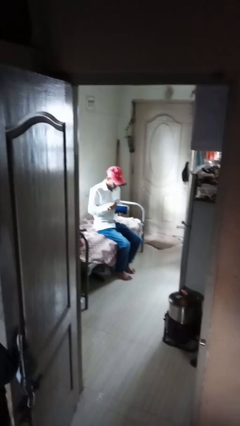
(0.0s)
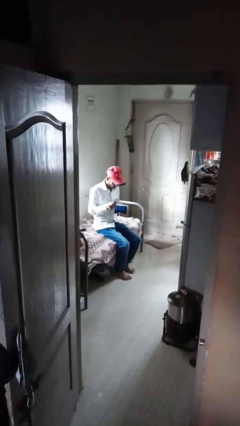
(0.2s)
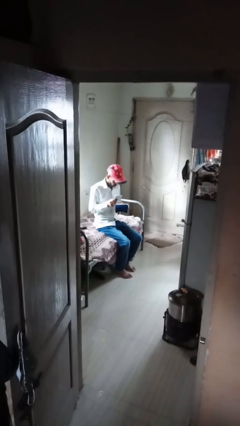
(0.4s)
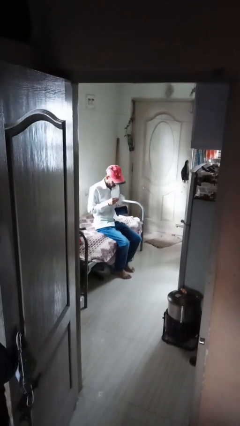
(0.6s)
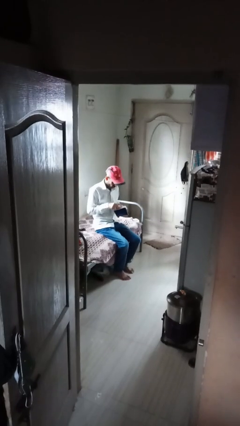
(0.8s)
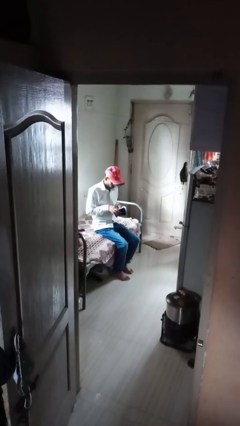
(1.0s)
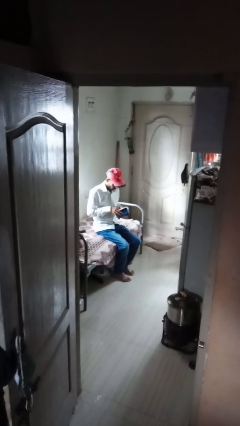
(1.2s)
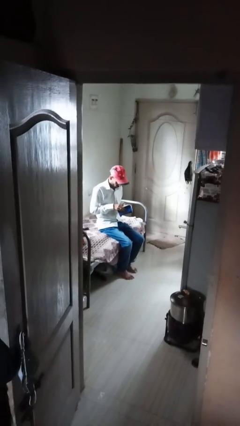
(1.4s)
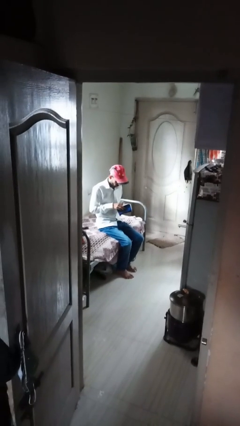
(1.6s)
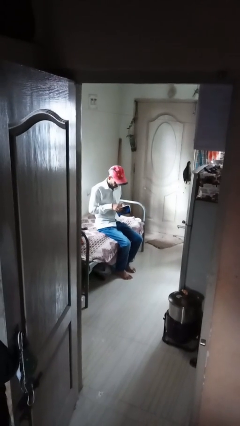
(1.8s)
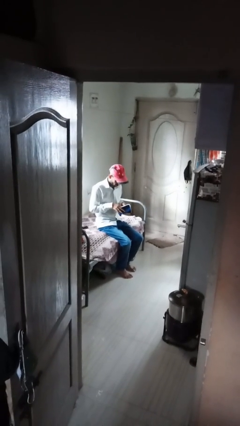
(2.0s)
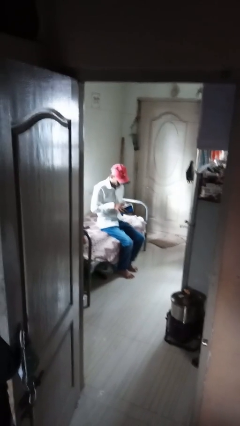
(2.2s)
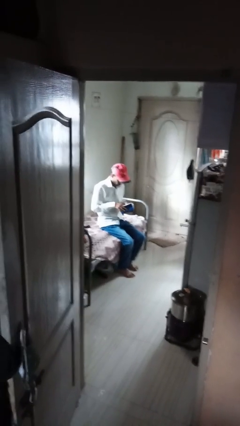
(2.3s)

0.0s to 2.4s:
person puts object into purse

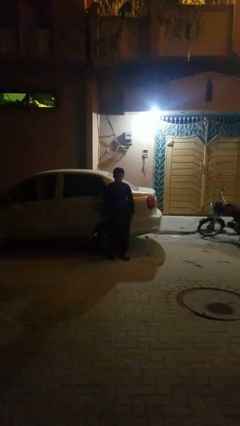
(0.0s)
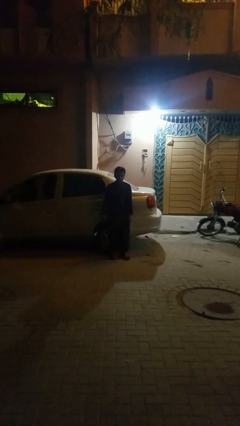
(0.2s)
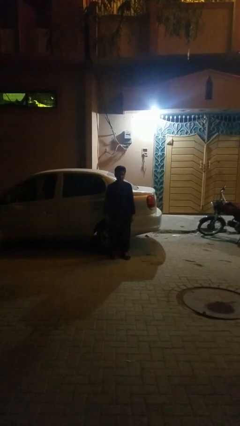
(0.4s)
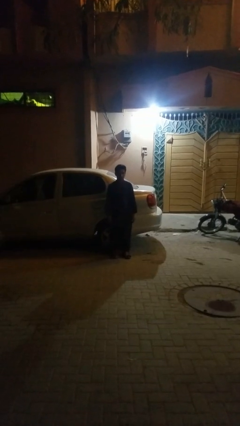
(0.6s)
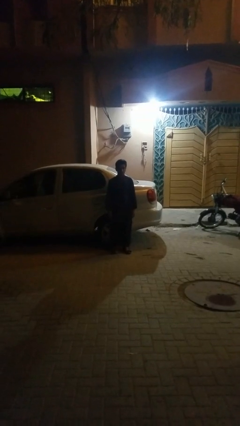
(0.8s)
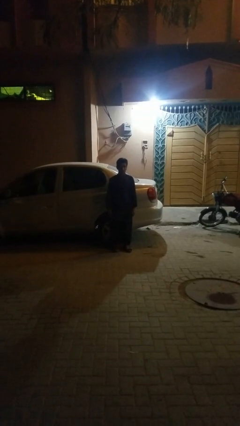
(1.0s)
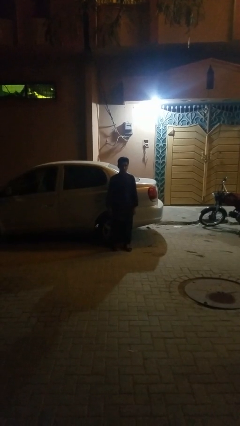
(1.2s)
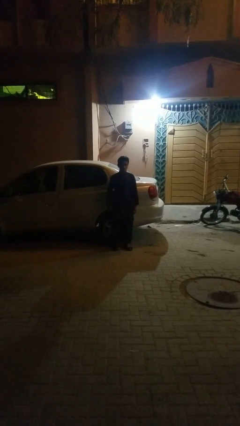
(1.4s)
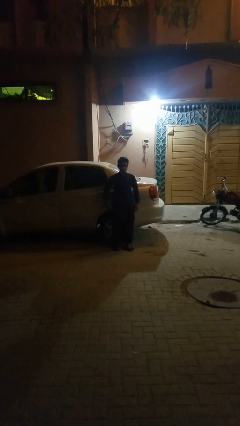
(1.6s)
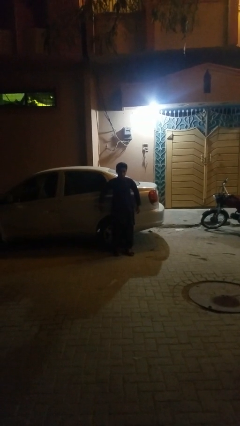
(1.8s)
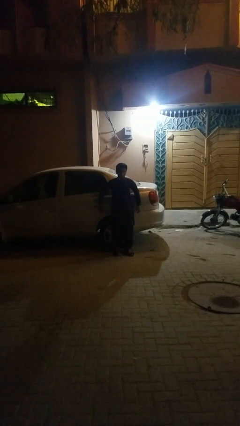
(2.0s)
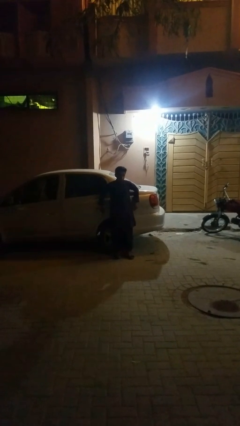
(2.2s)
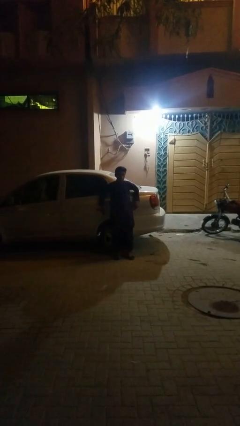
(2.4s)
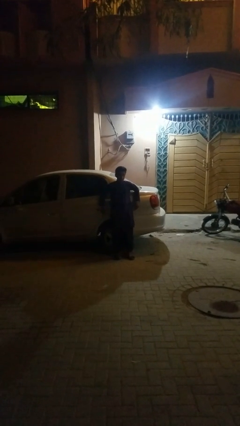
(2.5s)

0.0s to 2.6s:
person leans against car

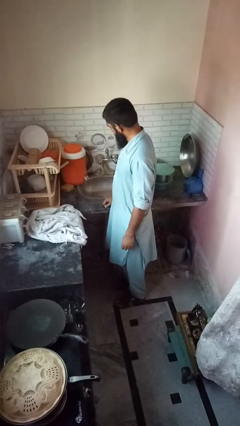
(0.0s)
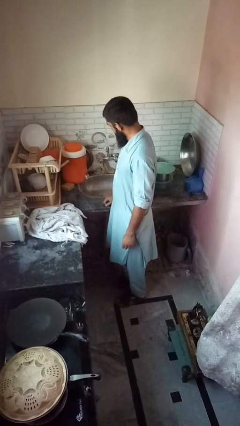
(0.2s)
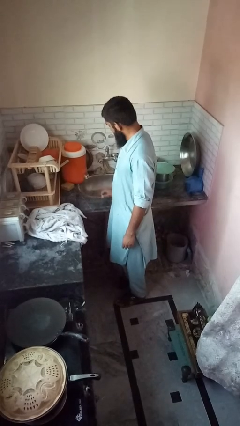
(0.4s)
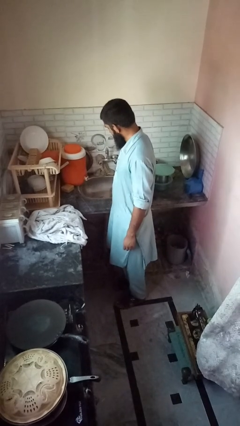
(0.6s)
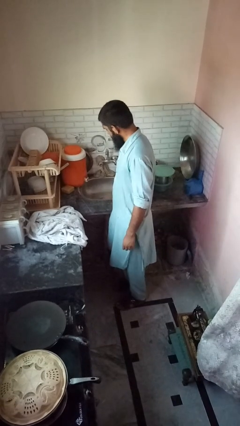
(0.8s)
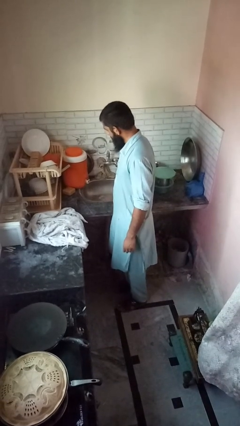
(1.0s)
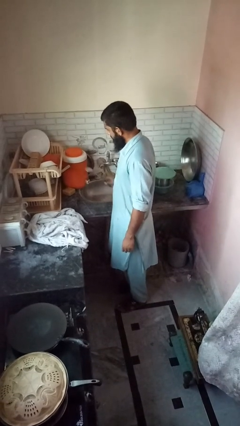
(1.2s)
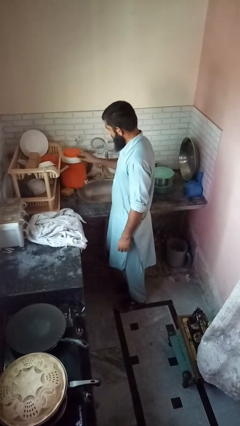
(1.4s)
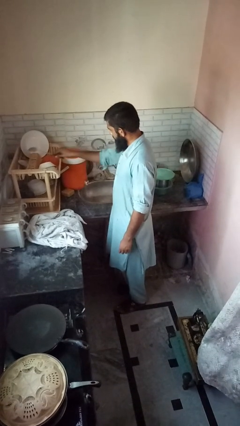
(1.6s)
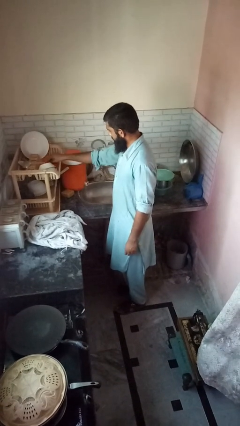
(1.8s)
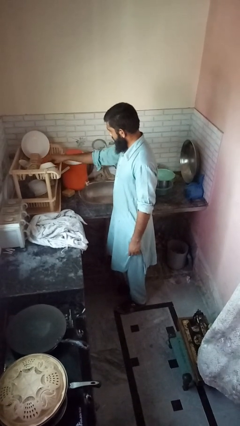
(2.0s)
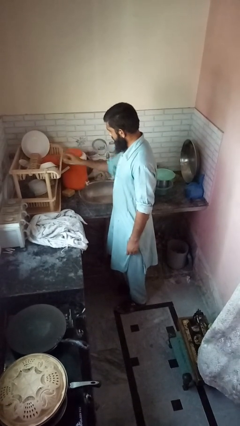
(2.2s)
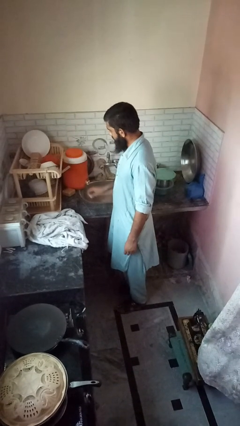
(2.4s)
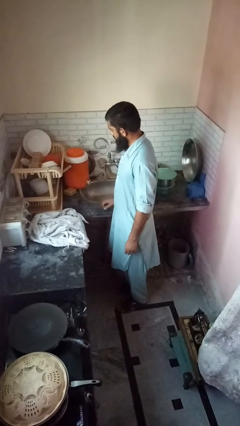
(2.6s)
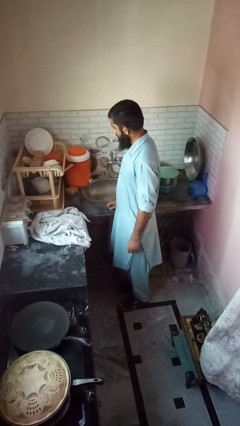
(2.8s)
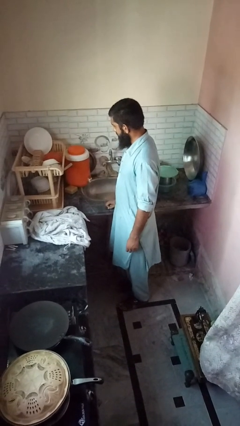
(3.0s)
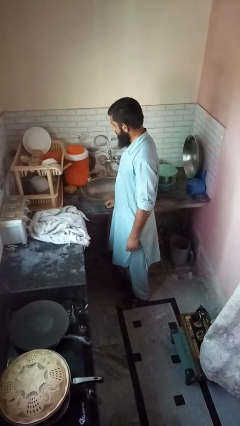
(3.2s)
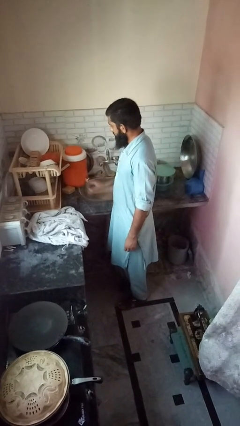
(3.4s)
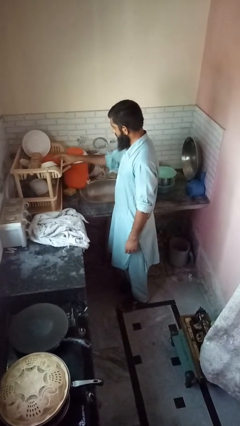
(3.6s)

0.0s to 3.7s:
person unloads dishwasher

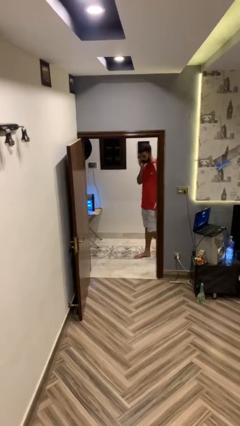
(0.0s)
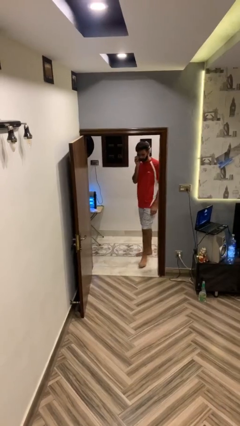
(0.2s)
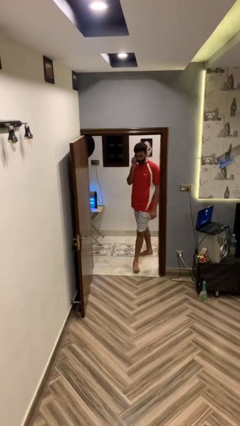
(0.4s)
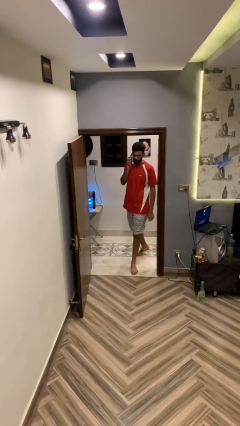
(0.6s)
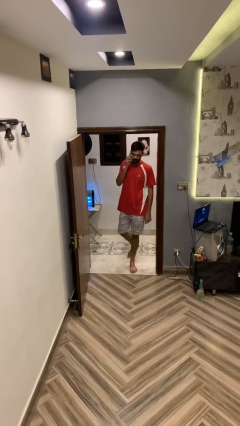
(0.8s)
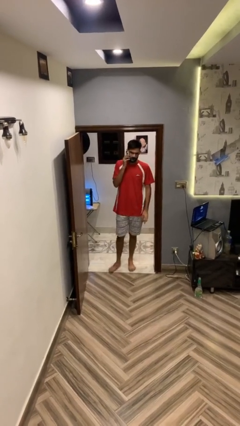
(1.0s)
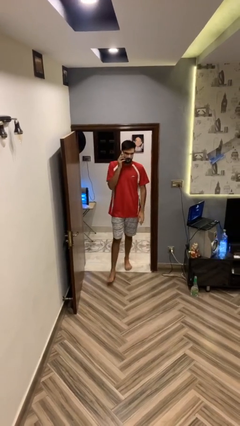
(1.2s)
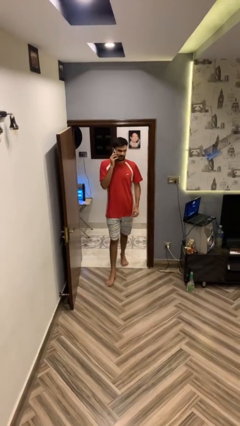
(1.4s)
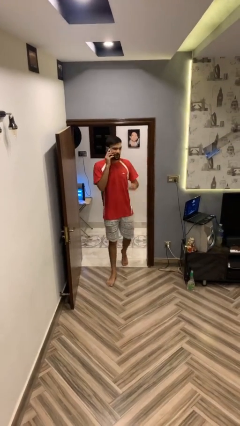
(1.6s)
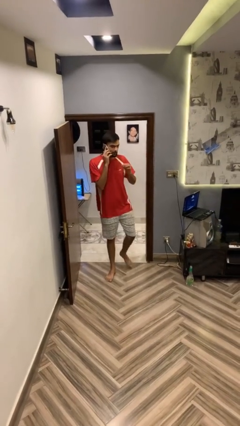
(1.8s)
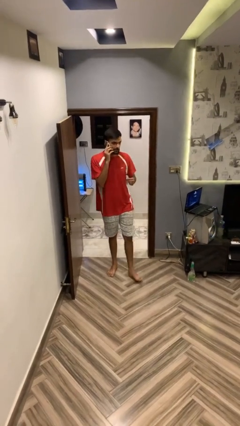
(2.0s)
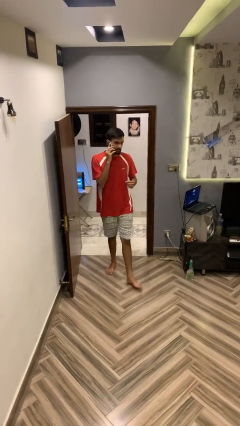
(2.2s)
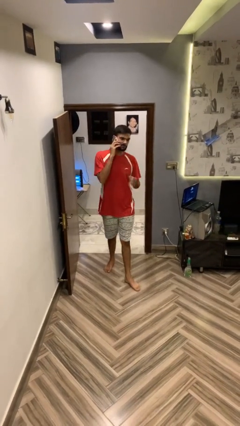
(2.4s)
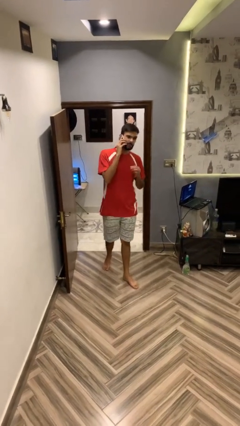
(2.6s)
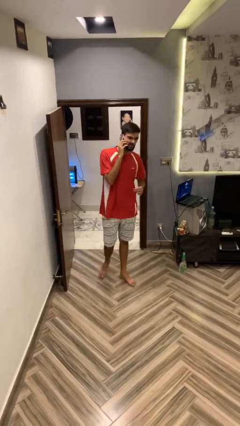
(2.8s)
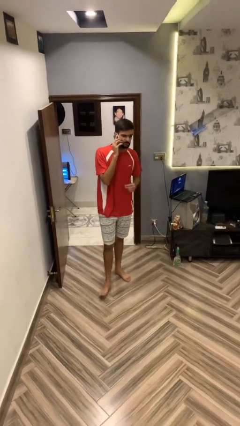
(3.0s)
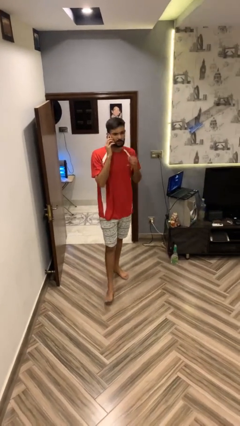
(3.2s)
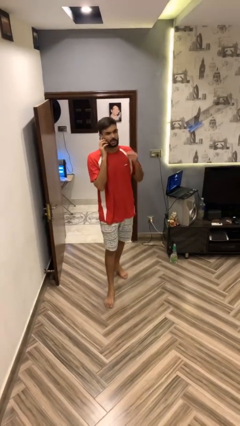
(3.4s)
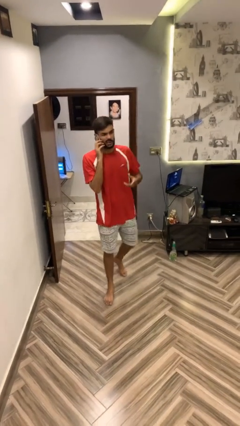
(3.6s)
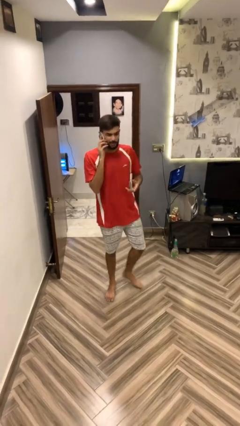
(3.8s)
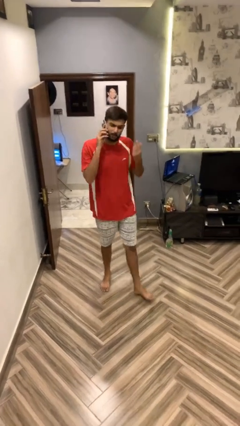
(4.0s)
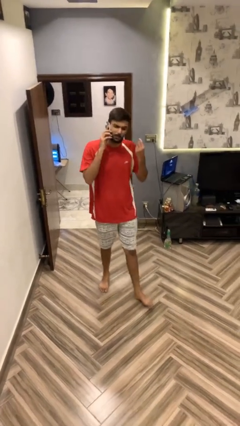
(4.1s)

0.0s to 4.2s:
person enters scene through structure

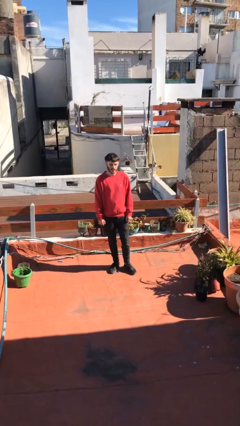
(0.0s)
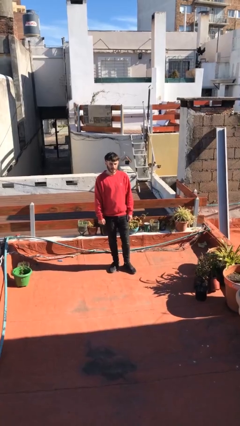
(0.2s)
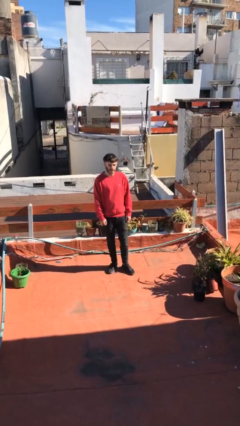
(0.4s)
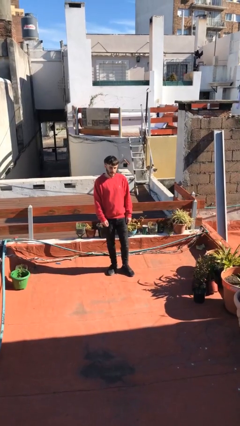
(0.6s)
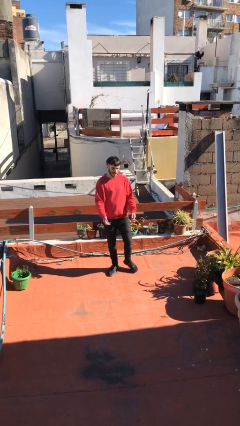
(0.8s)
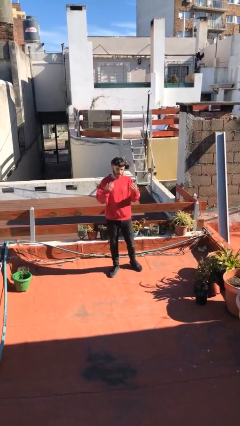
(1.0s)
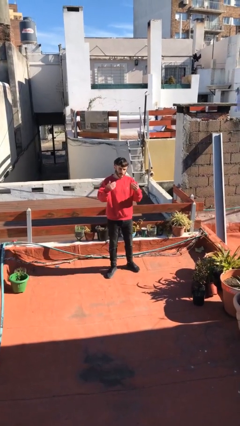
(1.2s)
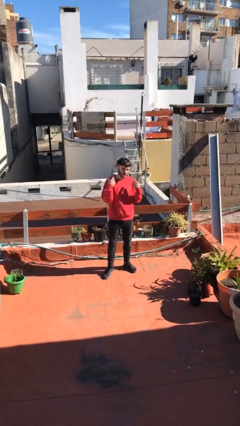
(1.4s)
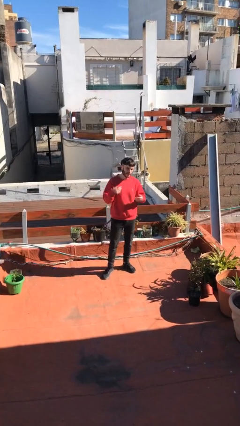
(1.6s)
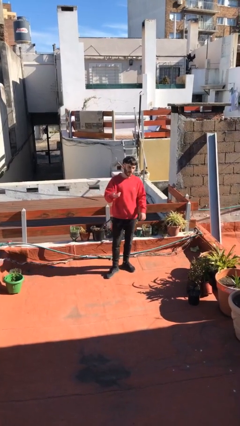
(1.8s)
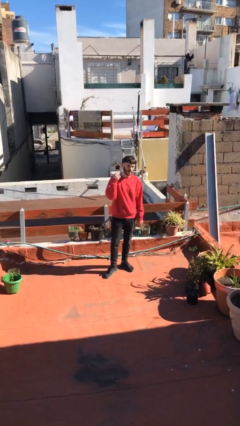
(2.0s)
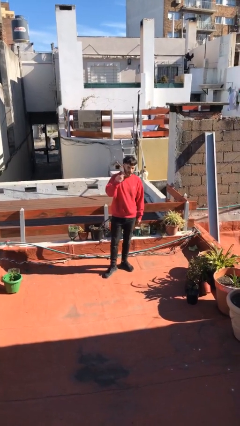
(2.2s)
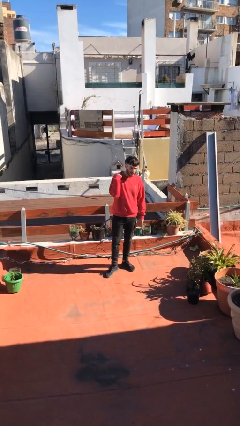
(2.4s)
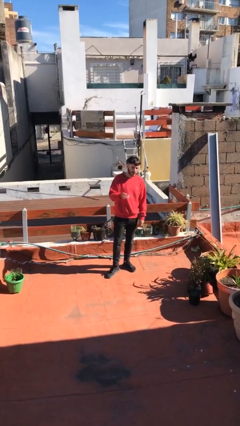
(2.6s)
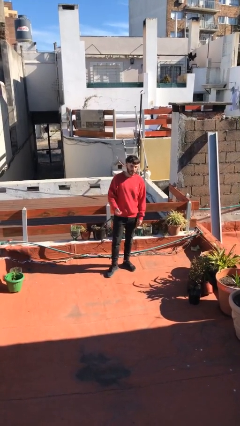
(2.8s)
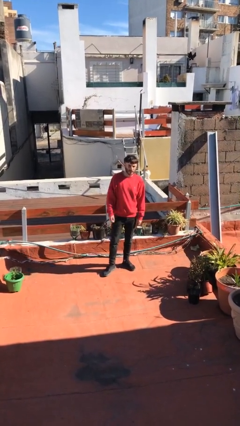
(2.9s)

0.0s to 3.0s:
person gestures come here

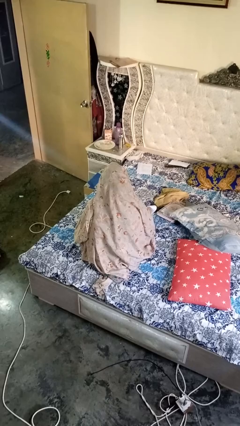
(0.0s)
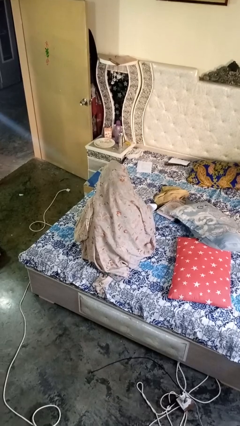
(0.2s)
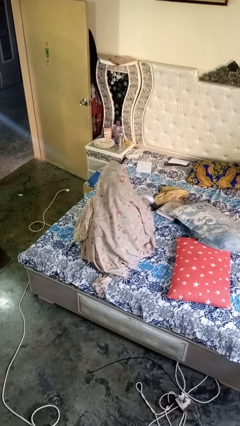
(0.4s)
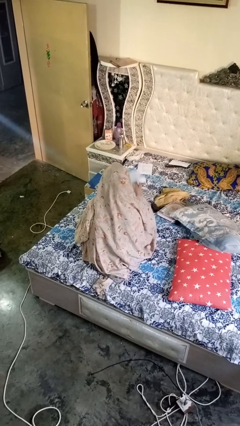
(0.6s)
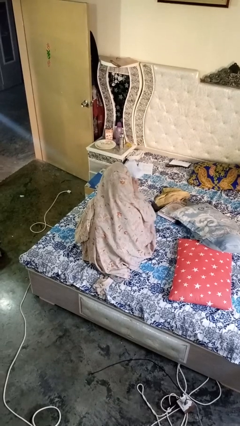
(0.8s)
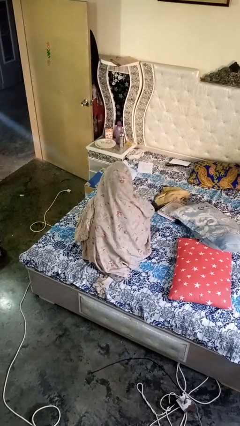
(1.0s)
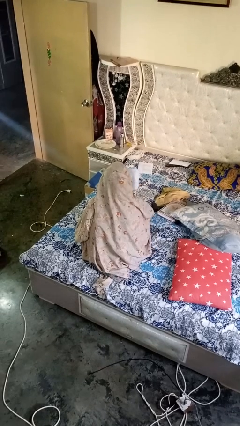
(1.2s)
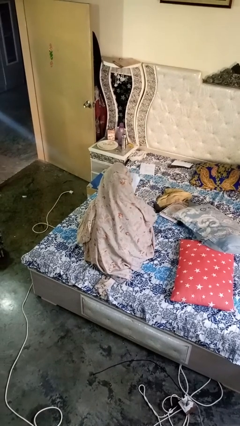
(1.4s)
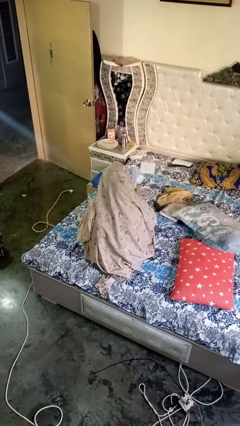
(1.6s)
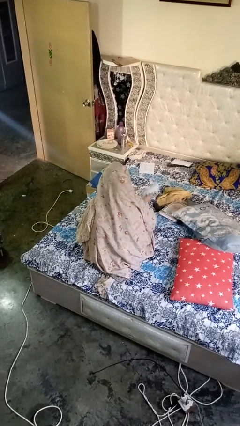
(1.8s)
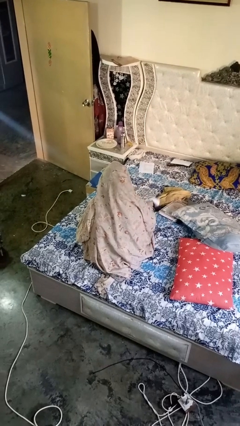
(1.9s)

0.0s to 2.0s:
person wipes mouth with napkin
